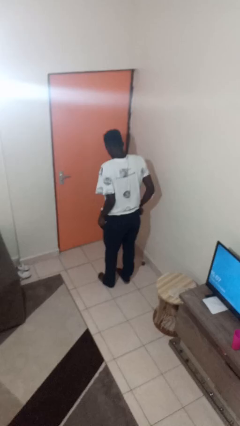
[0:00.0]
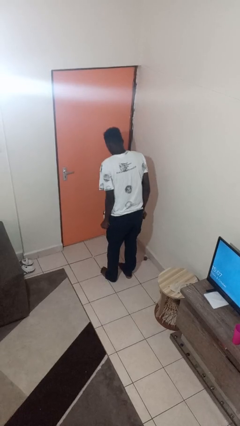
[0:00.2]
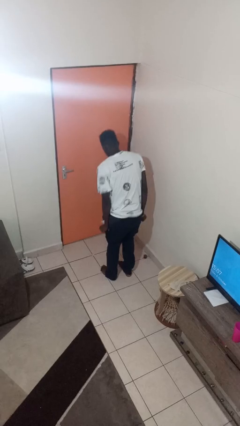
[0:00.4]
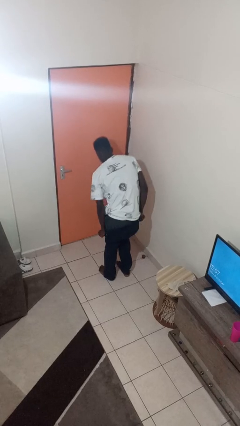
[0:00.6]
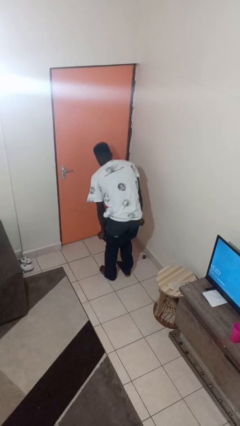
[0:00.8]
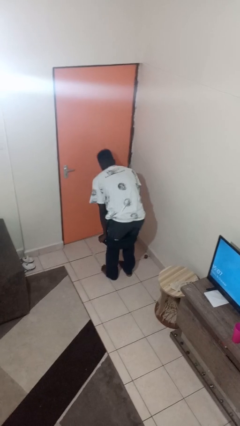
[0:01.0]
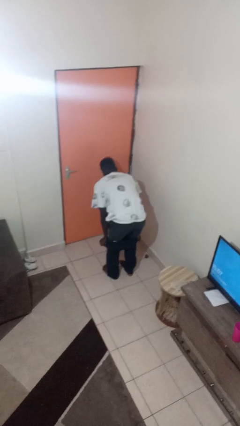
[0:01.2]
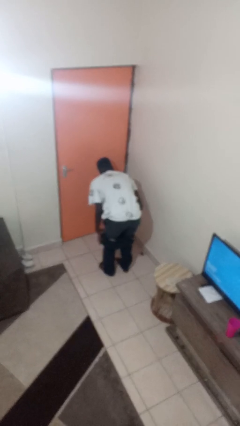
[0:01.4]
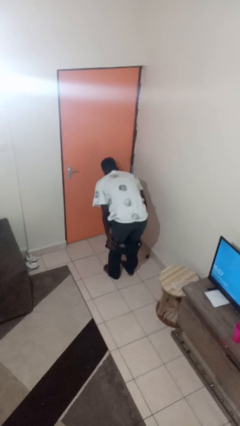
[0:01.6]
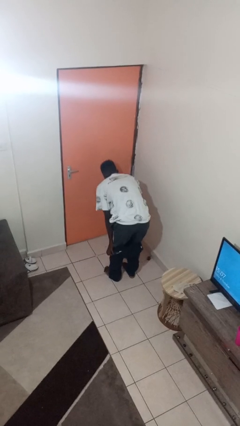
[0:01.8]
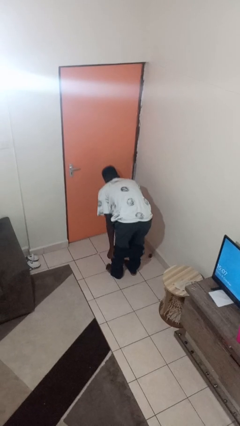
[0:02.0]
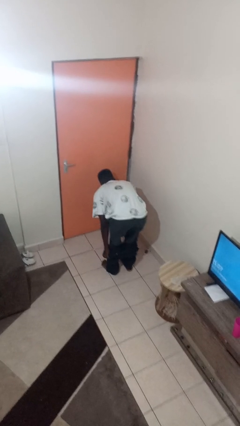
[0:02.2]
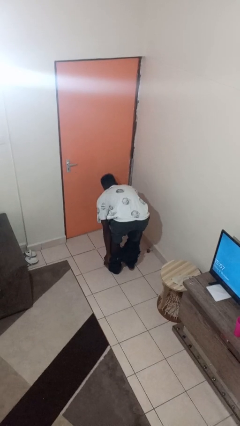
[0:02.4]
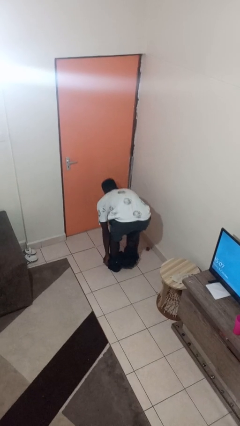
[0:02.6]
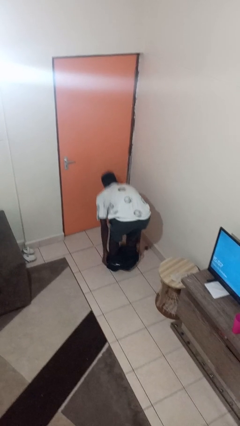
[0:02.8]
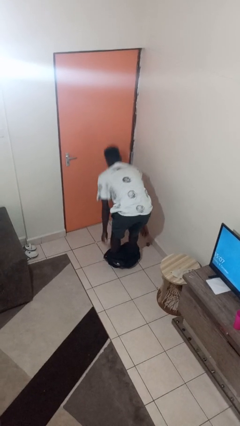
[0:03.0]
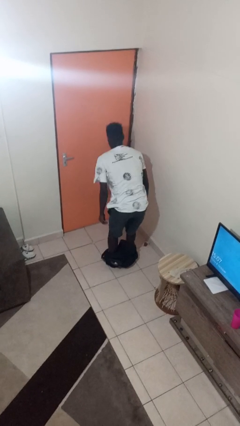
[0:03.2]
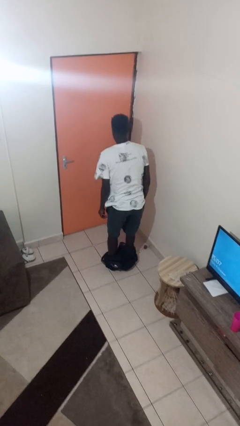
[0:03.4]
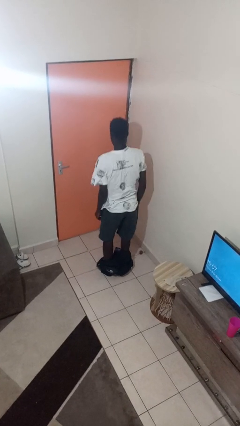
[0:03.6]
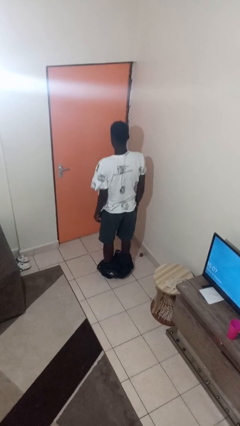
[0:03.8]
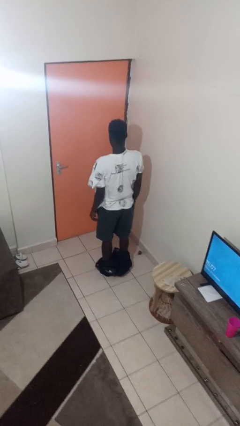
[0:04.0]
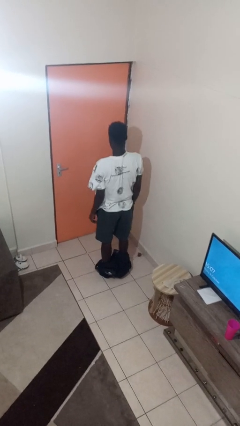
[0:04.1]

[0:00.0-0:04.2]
person takes off pants

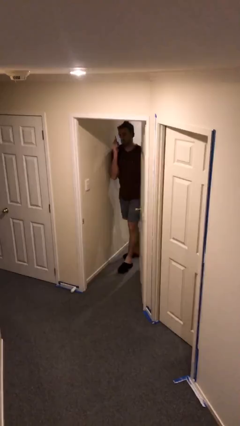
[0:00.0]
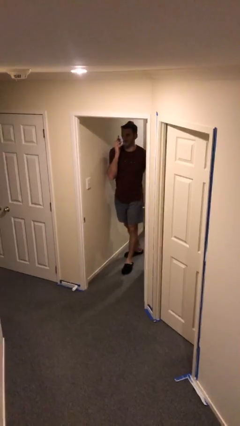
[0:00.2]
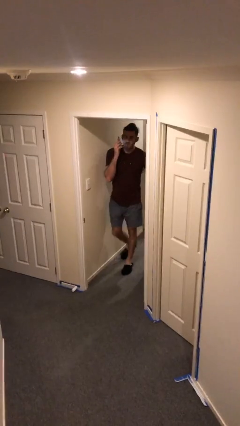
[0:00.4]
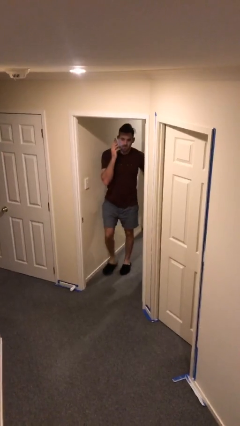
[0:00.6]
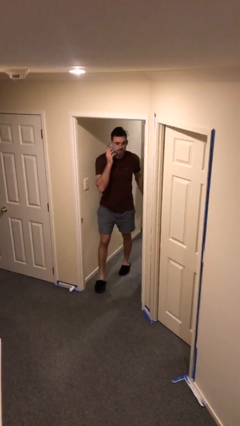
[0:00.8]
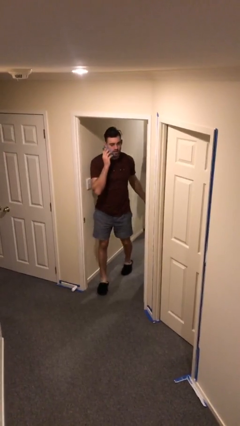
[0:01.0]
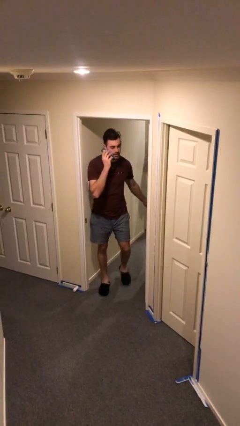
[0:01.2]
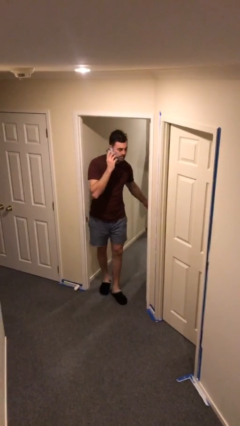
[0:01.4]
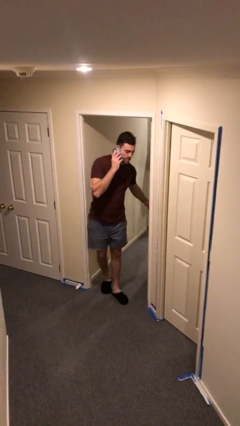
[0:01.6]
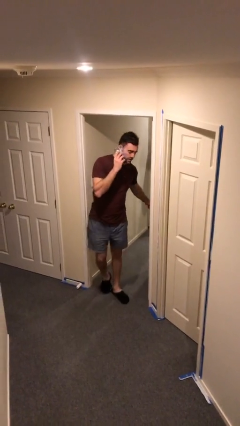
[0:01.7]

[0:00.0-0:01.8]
person enters scene through structure

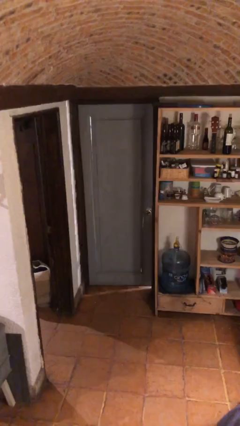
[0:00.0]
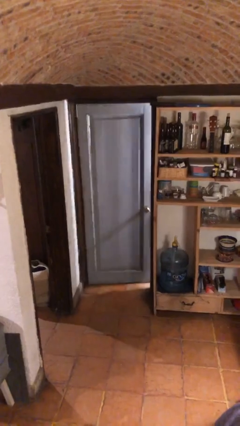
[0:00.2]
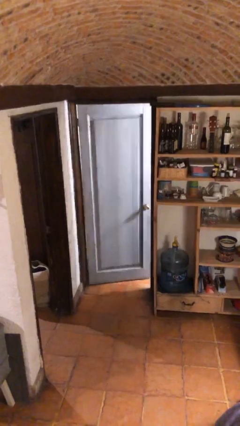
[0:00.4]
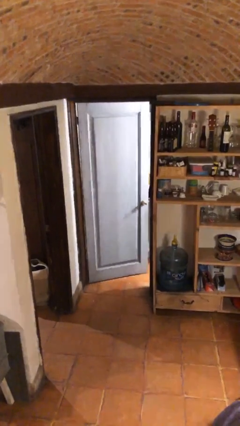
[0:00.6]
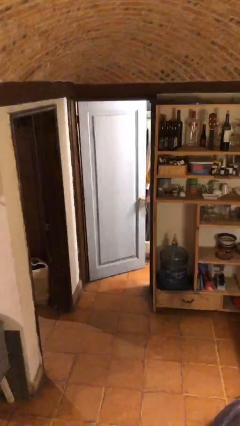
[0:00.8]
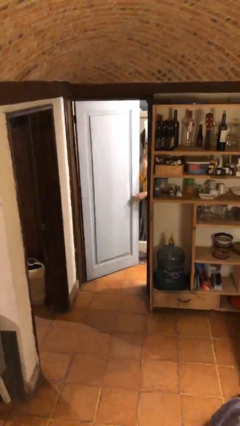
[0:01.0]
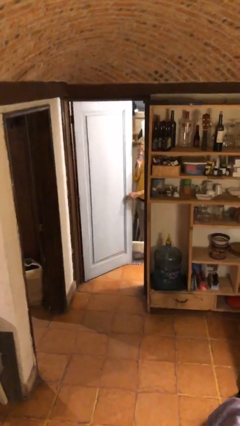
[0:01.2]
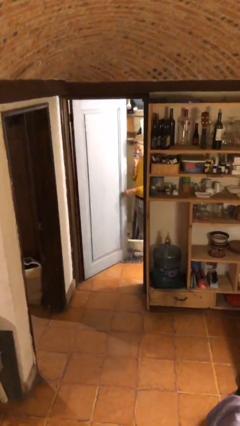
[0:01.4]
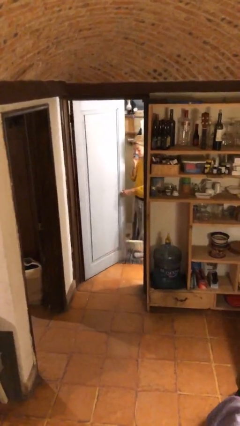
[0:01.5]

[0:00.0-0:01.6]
person opens facility door

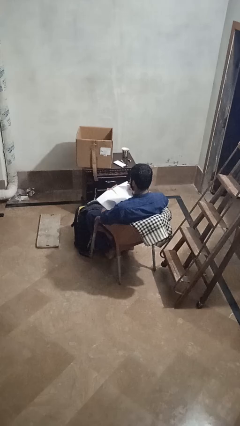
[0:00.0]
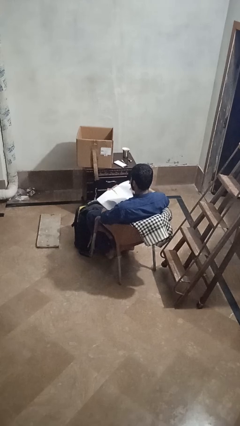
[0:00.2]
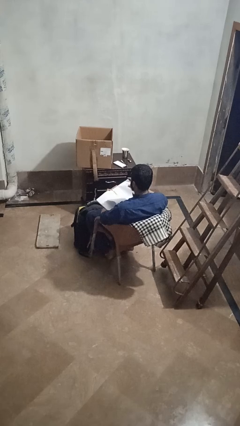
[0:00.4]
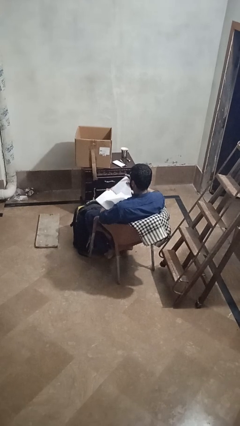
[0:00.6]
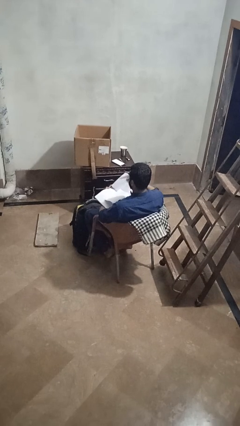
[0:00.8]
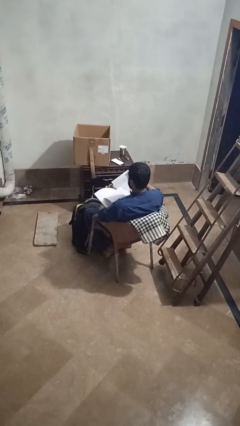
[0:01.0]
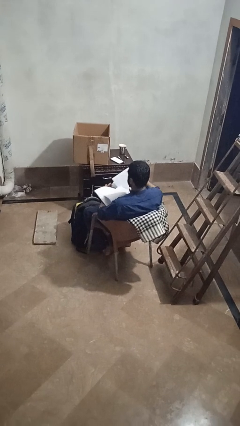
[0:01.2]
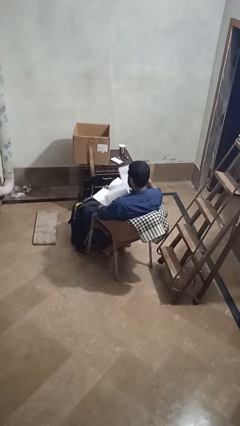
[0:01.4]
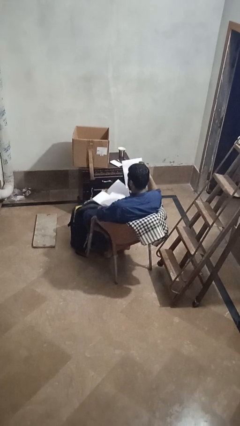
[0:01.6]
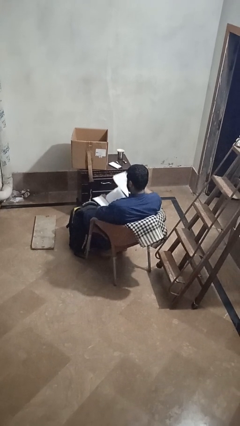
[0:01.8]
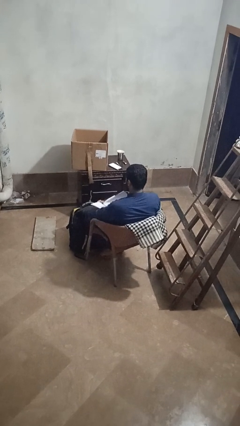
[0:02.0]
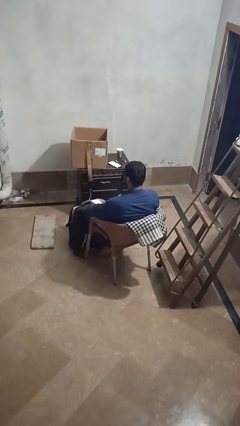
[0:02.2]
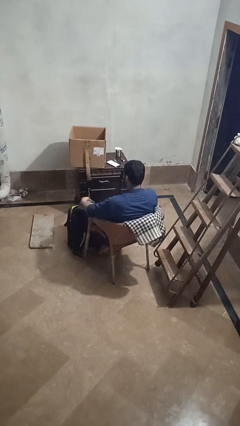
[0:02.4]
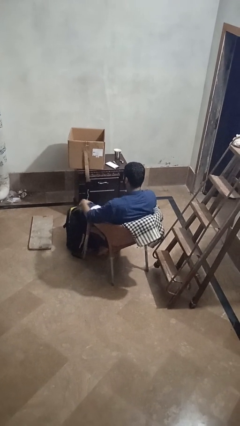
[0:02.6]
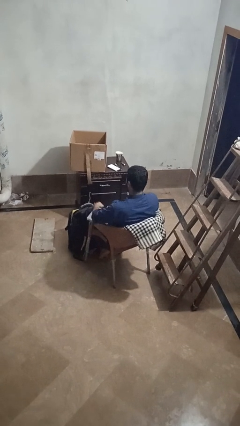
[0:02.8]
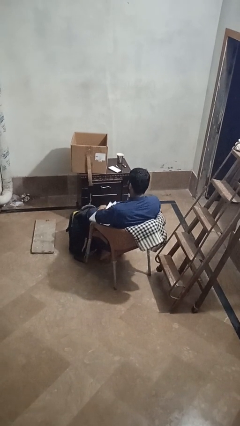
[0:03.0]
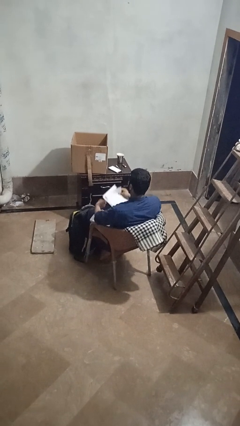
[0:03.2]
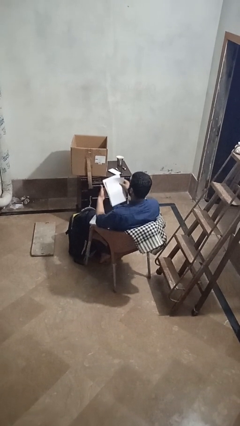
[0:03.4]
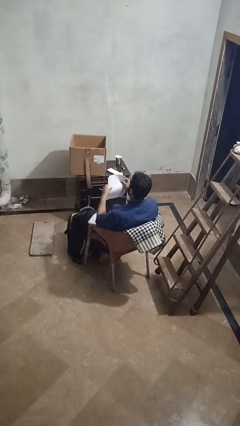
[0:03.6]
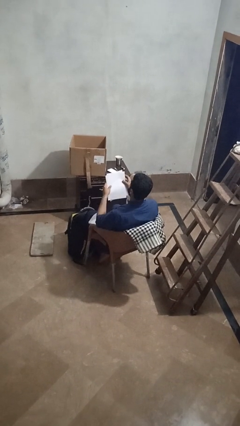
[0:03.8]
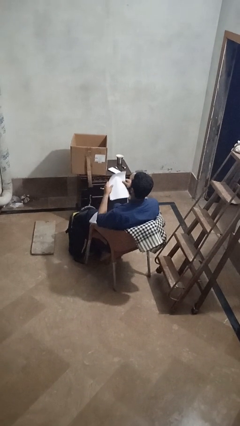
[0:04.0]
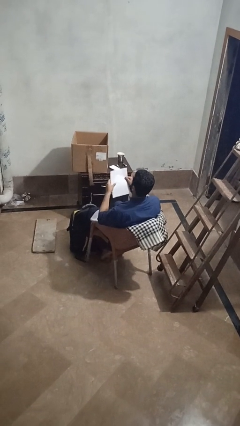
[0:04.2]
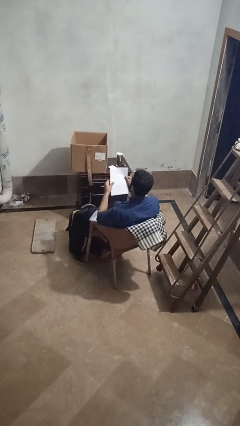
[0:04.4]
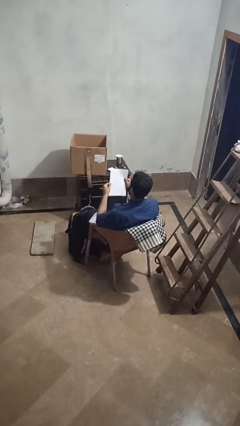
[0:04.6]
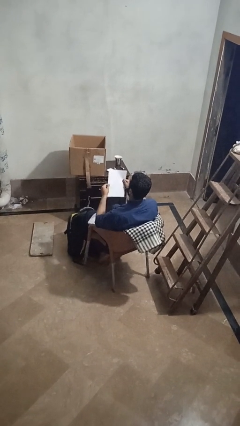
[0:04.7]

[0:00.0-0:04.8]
person tears paper

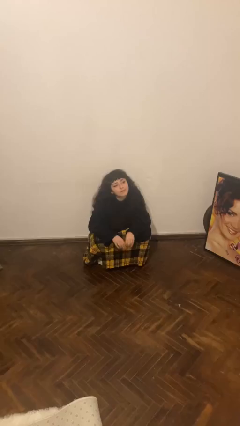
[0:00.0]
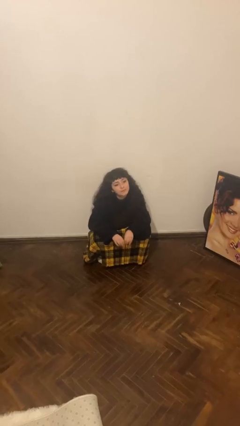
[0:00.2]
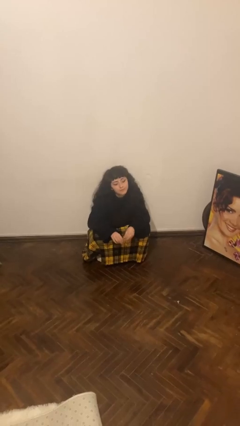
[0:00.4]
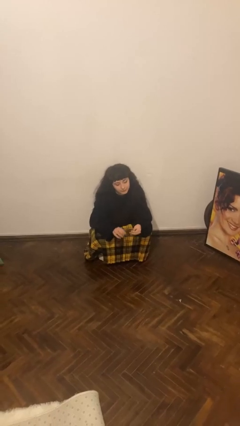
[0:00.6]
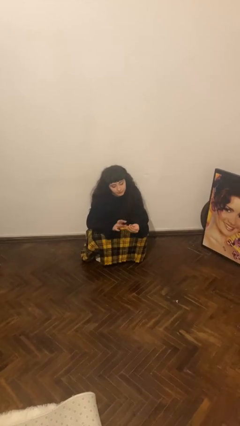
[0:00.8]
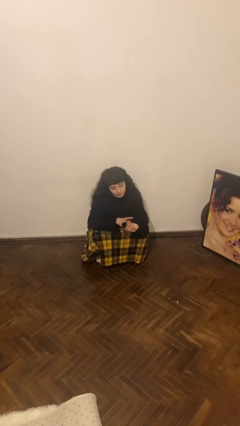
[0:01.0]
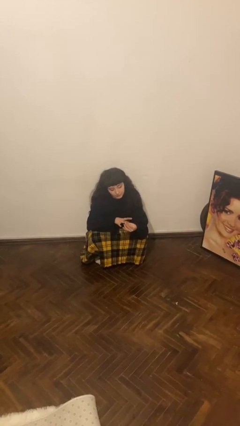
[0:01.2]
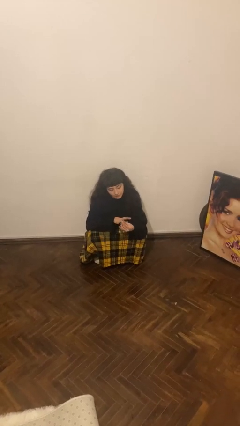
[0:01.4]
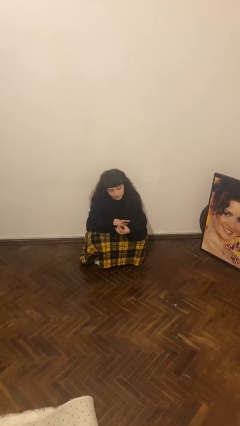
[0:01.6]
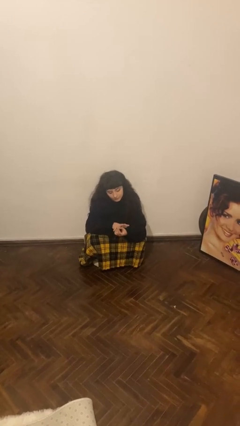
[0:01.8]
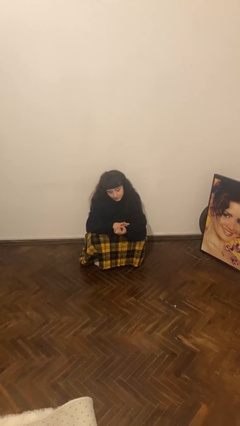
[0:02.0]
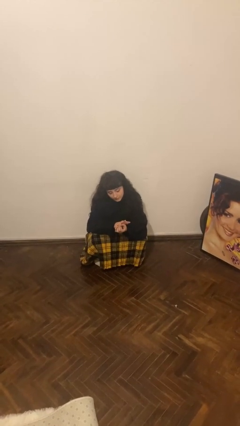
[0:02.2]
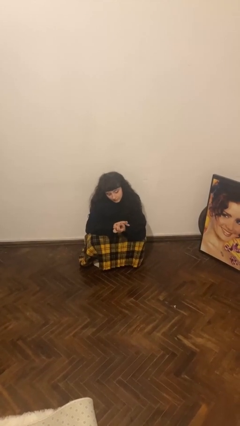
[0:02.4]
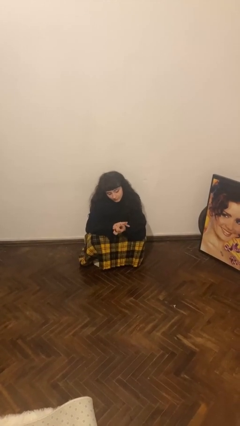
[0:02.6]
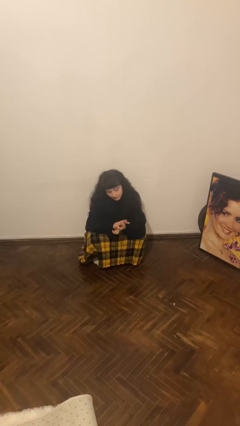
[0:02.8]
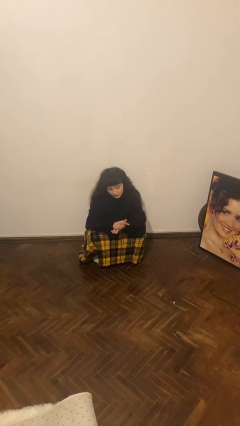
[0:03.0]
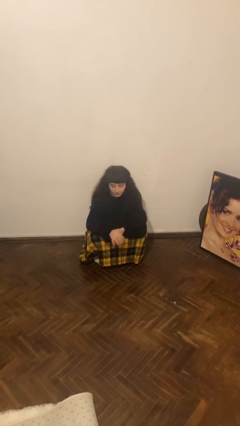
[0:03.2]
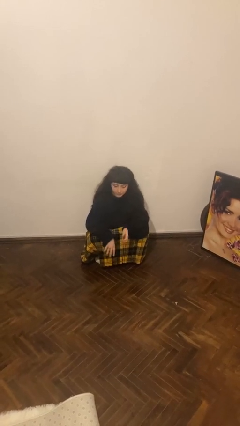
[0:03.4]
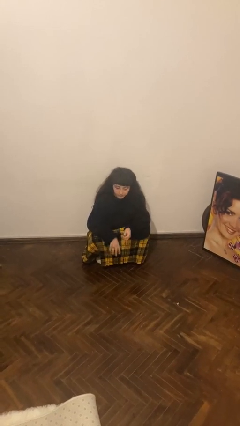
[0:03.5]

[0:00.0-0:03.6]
person puts on ring

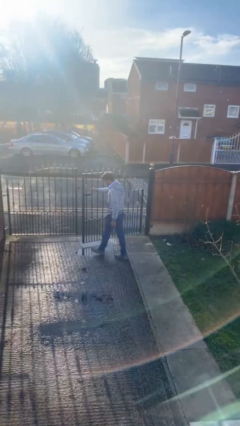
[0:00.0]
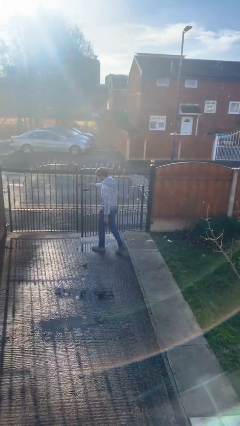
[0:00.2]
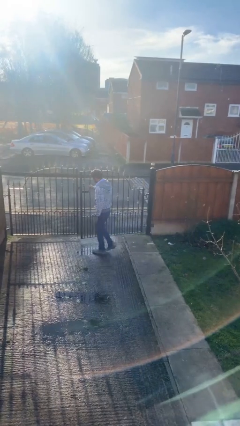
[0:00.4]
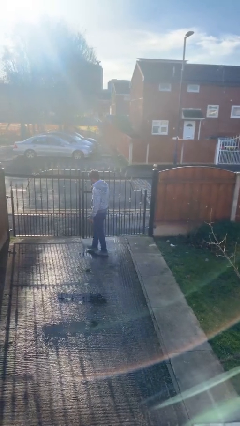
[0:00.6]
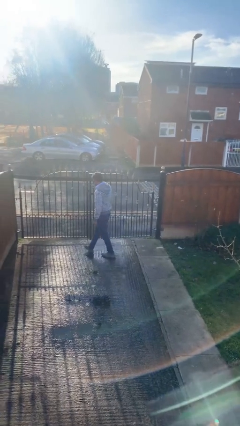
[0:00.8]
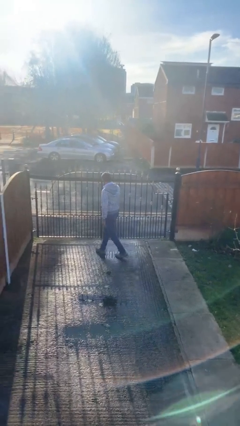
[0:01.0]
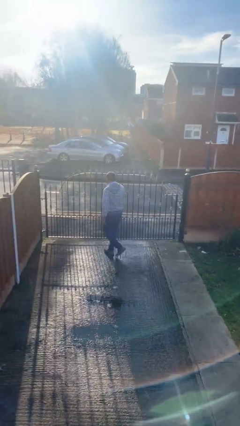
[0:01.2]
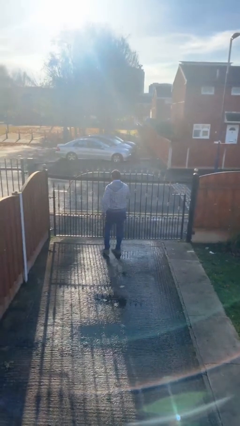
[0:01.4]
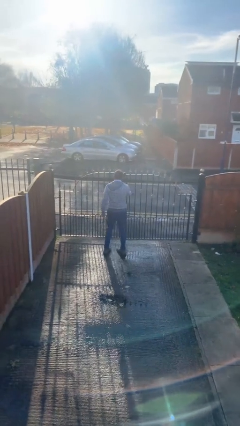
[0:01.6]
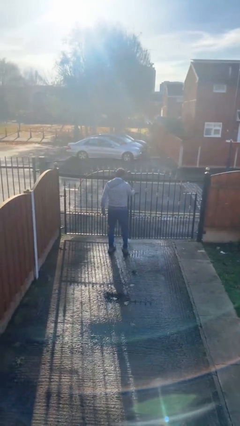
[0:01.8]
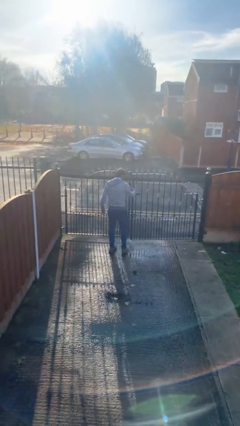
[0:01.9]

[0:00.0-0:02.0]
person closes facility door
